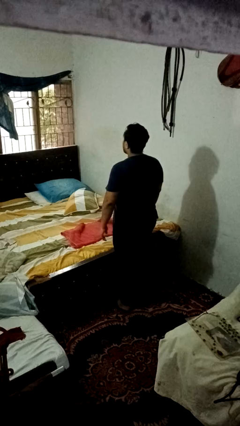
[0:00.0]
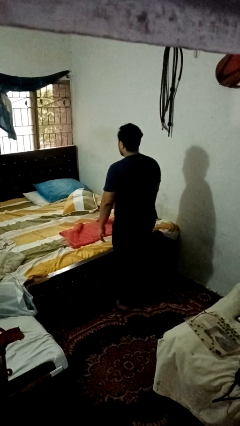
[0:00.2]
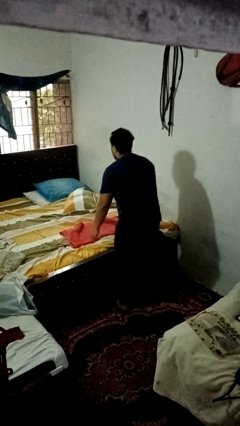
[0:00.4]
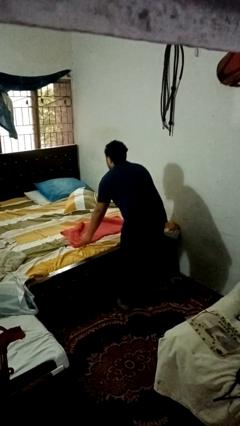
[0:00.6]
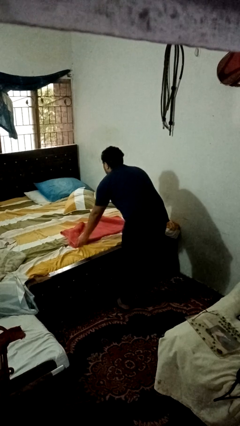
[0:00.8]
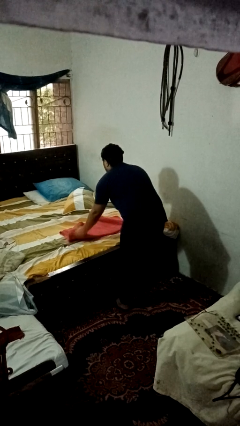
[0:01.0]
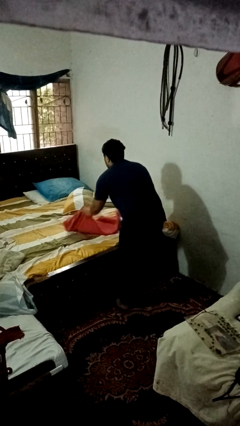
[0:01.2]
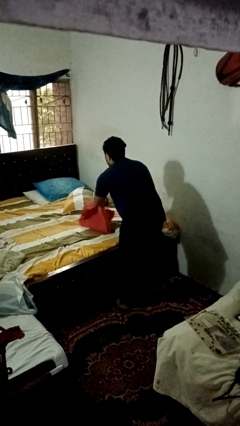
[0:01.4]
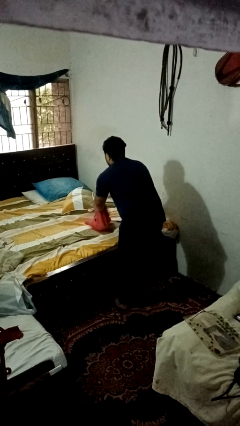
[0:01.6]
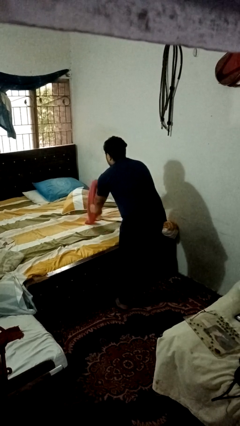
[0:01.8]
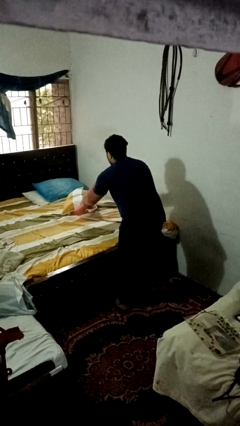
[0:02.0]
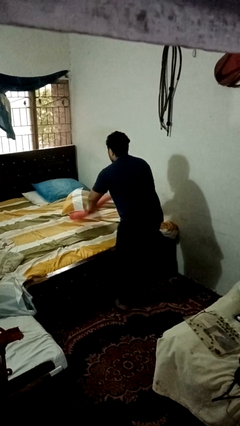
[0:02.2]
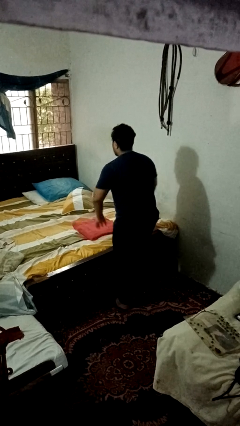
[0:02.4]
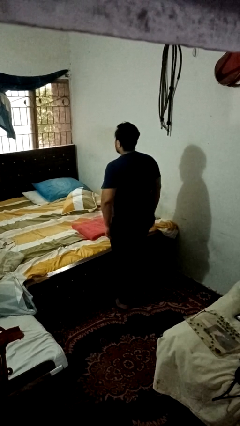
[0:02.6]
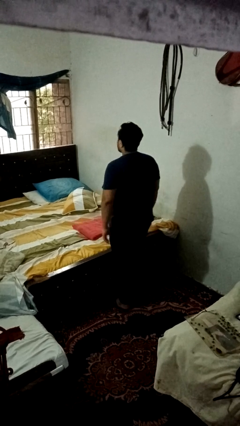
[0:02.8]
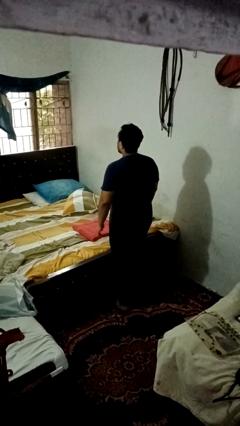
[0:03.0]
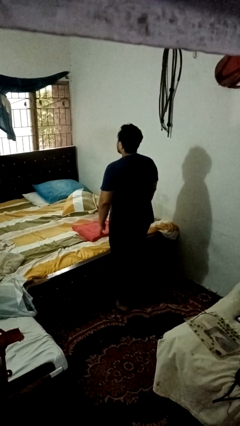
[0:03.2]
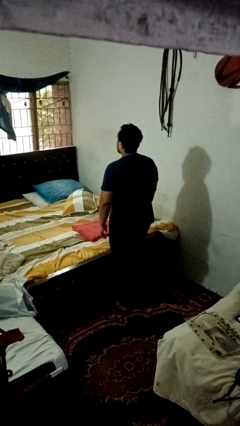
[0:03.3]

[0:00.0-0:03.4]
person folds towel

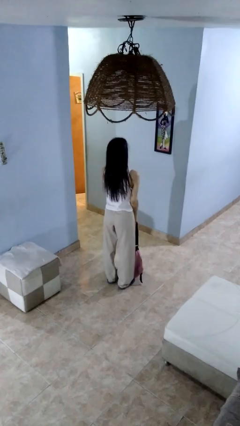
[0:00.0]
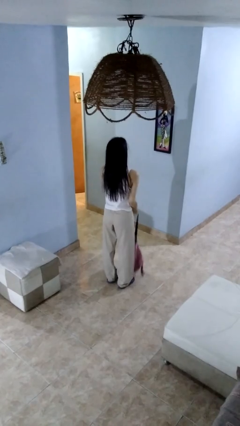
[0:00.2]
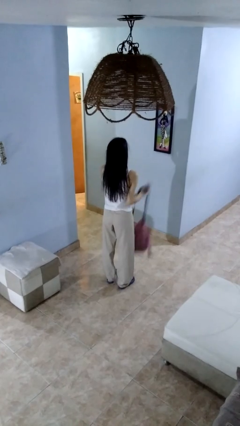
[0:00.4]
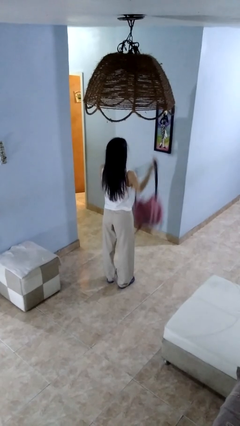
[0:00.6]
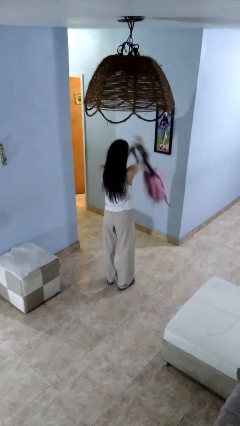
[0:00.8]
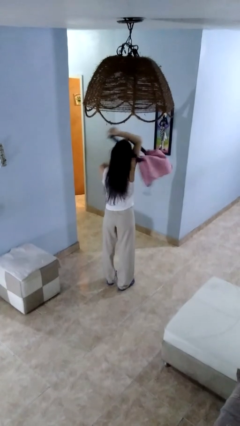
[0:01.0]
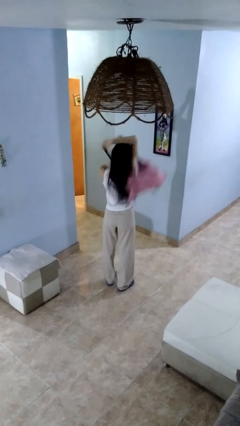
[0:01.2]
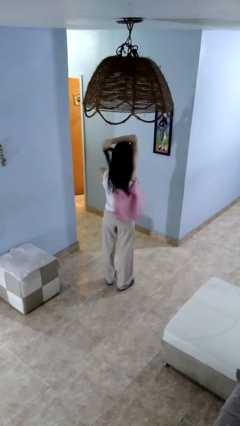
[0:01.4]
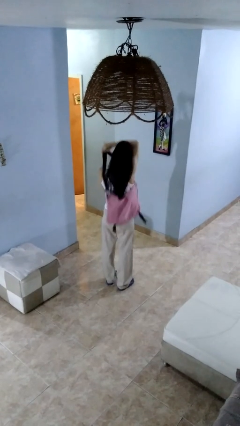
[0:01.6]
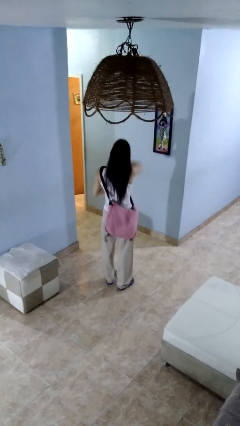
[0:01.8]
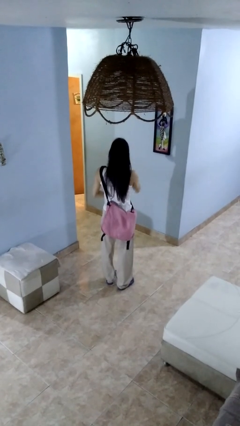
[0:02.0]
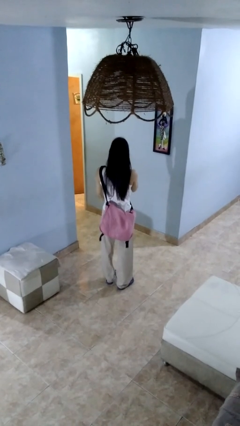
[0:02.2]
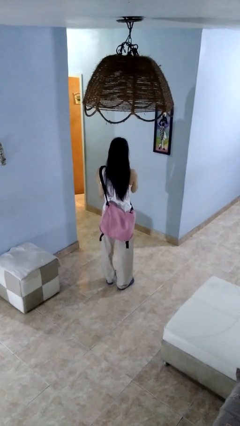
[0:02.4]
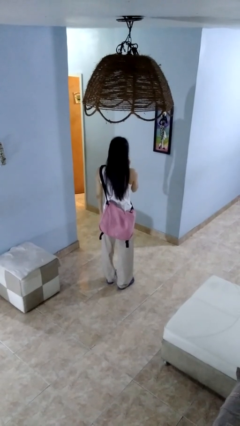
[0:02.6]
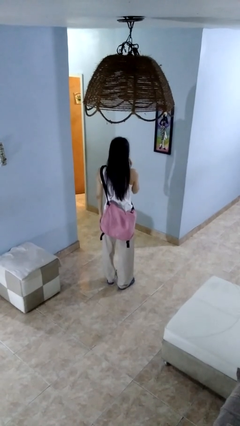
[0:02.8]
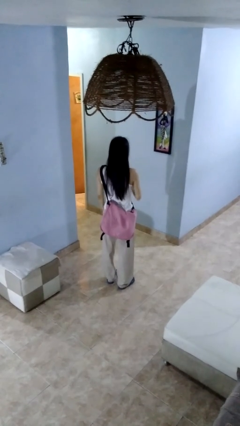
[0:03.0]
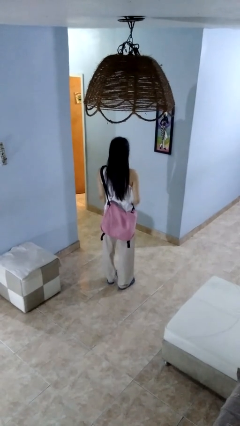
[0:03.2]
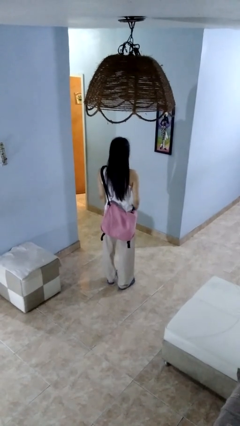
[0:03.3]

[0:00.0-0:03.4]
person puts on backpack

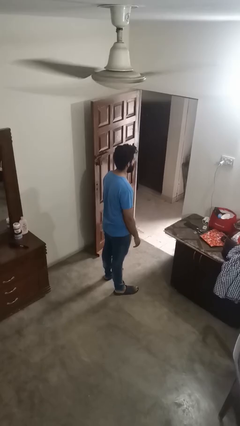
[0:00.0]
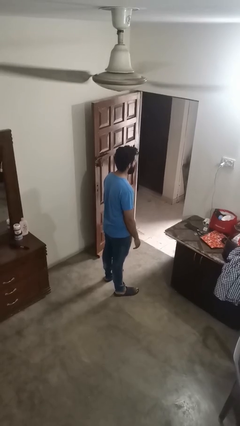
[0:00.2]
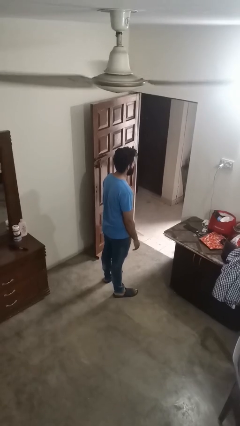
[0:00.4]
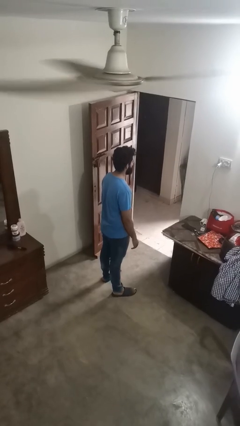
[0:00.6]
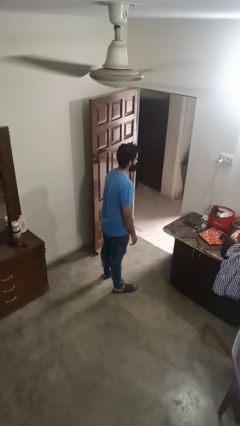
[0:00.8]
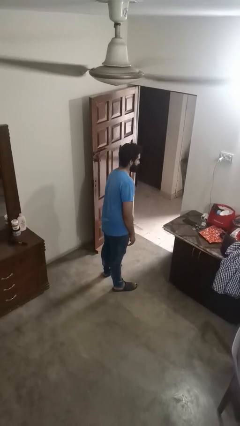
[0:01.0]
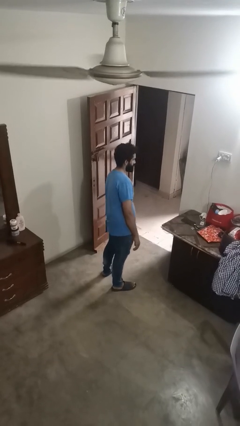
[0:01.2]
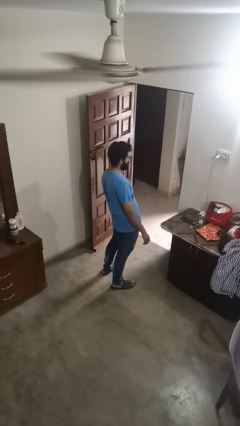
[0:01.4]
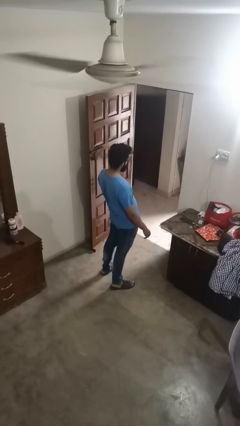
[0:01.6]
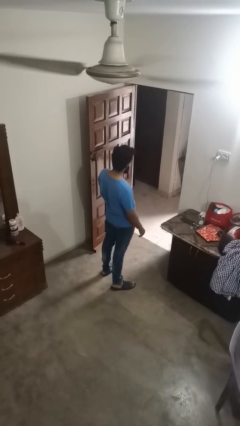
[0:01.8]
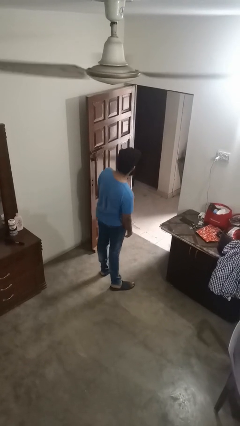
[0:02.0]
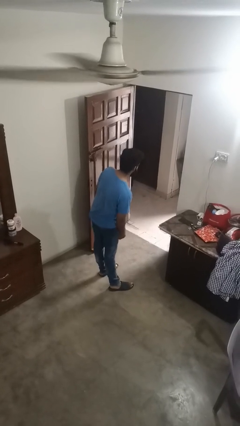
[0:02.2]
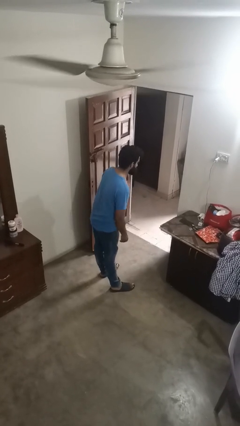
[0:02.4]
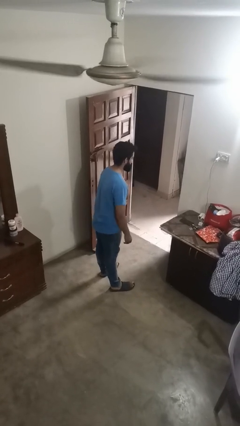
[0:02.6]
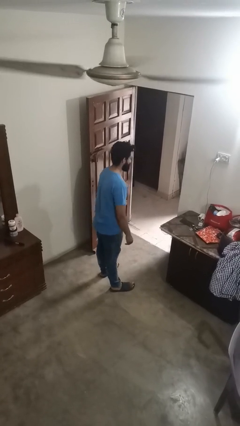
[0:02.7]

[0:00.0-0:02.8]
person wiggles hips

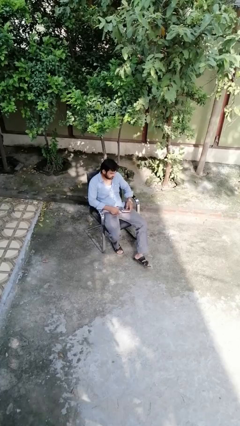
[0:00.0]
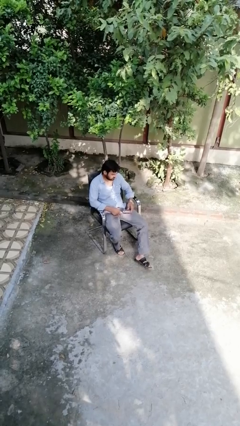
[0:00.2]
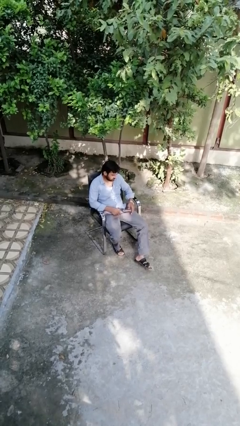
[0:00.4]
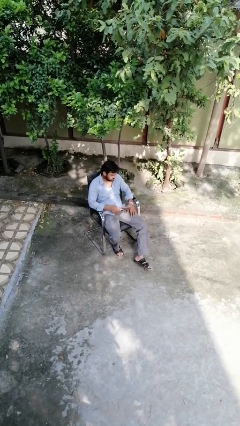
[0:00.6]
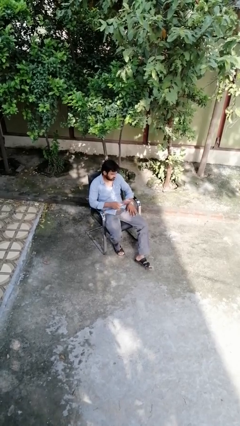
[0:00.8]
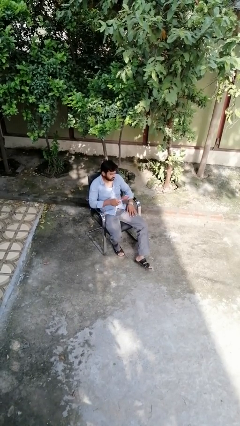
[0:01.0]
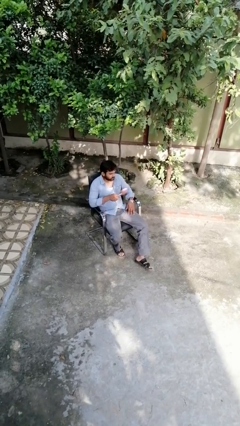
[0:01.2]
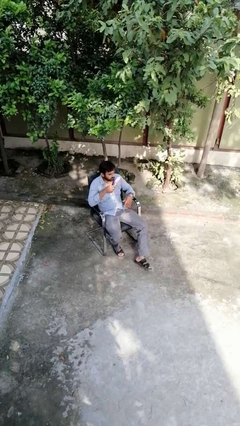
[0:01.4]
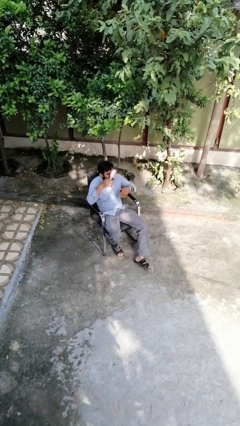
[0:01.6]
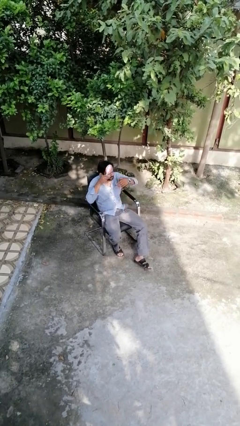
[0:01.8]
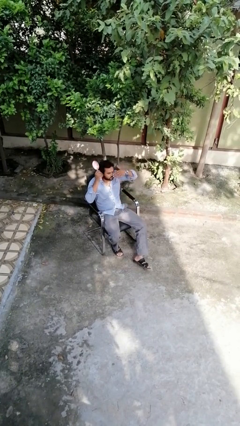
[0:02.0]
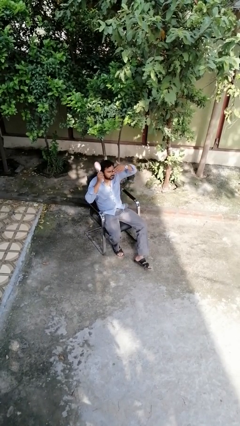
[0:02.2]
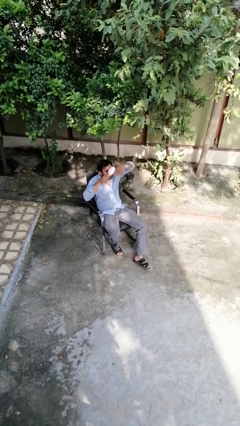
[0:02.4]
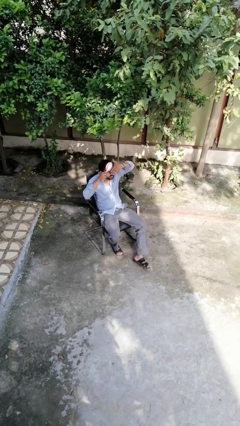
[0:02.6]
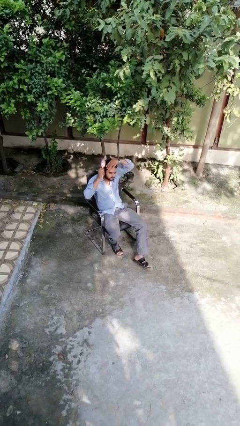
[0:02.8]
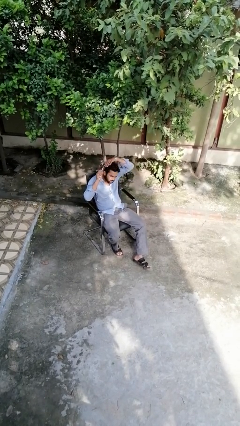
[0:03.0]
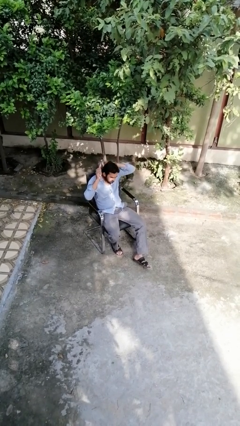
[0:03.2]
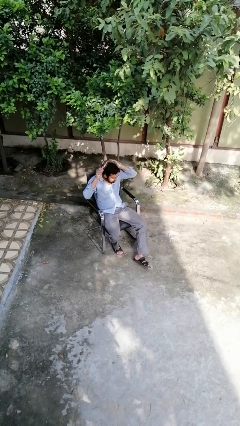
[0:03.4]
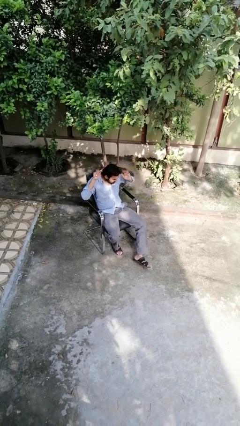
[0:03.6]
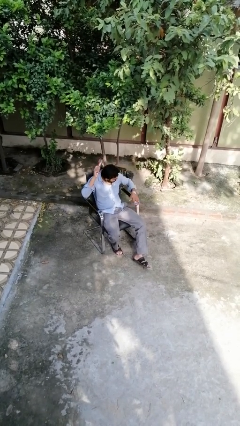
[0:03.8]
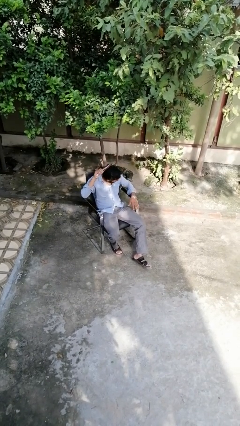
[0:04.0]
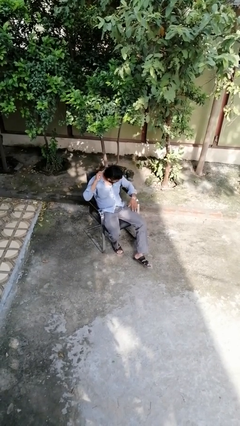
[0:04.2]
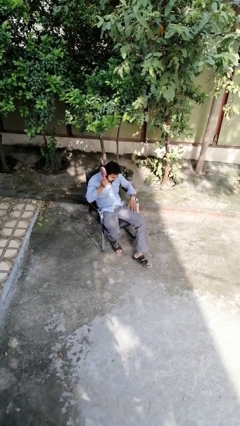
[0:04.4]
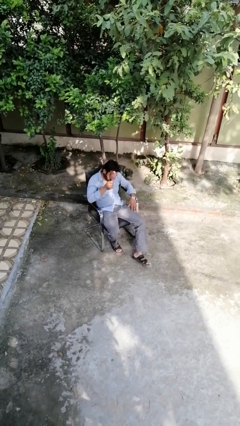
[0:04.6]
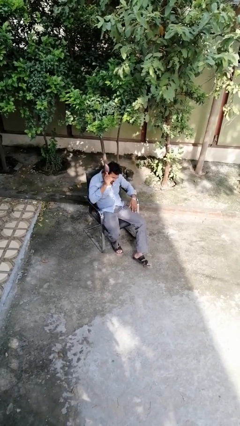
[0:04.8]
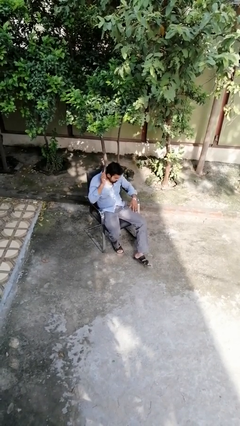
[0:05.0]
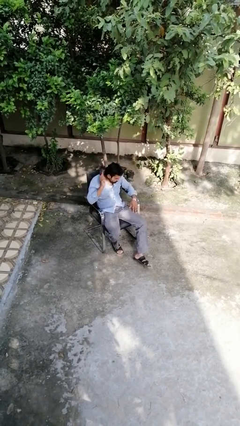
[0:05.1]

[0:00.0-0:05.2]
person brushes hair

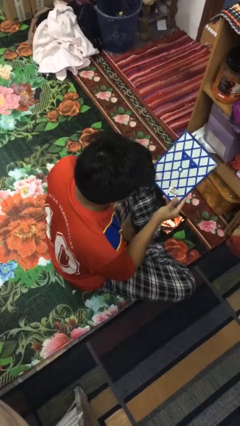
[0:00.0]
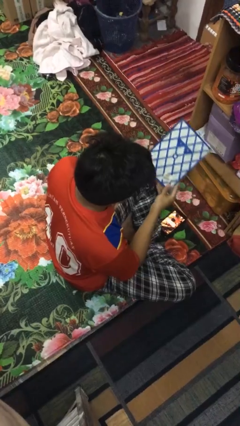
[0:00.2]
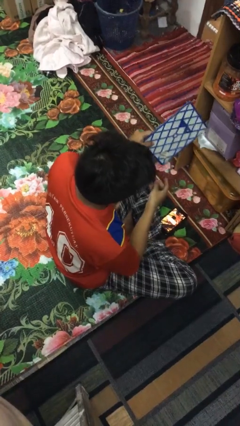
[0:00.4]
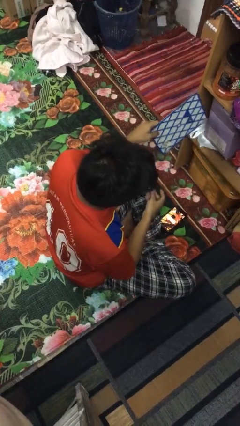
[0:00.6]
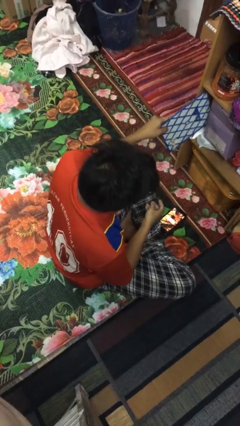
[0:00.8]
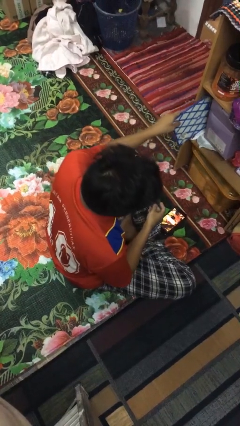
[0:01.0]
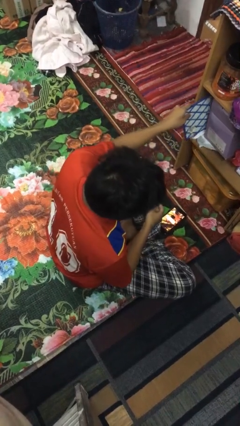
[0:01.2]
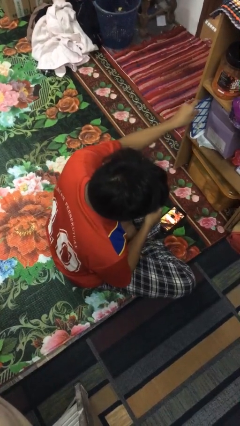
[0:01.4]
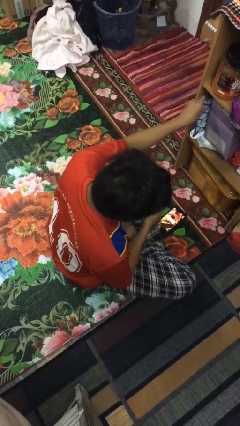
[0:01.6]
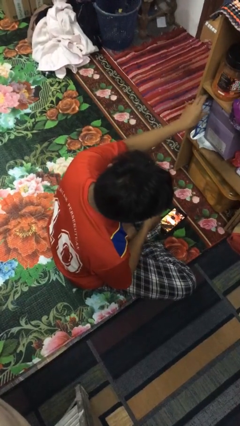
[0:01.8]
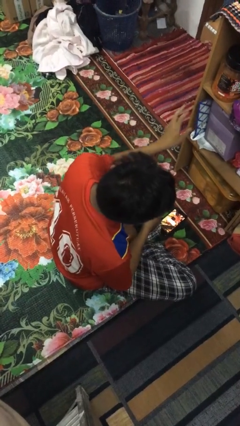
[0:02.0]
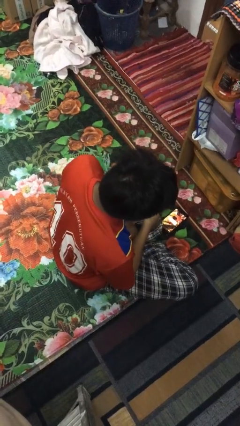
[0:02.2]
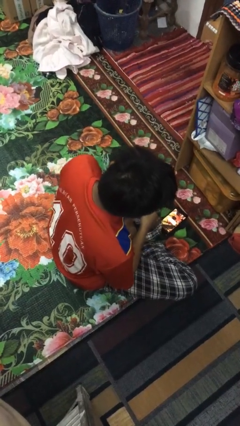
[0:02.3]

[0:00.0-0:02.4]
person puts down object into cabinet

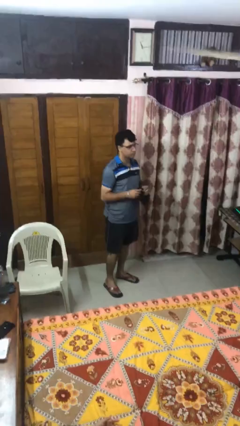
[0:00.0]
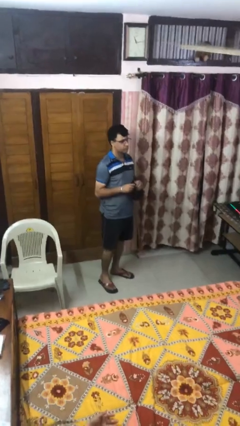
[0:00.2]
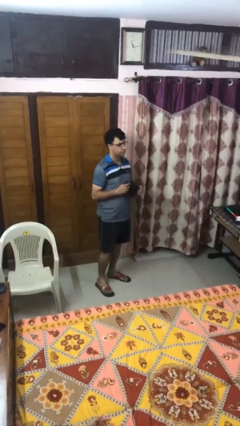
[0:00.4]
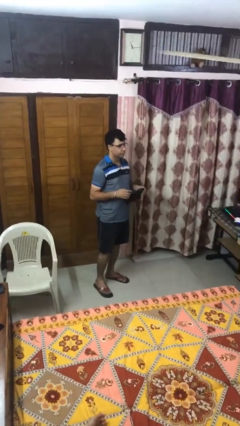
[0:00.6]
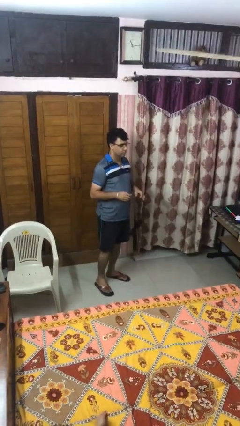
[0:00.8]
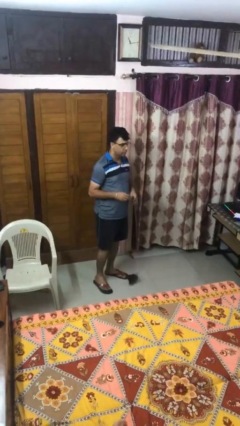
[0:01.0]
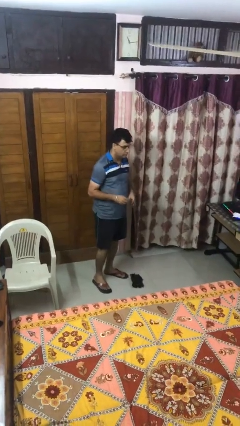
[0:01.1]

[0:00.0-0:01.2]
person drops object
